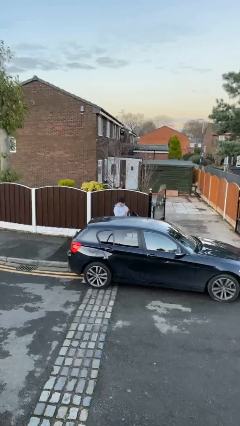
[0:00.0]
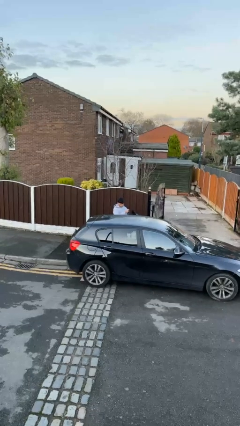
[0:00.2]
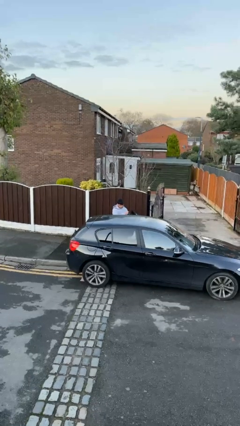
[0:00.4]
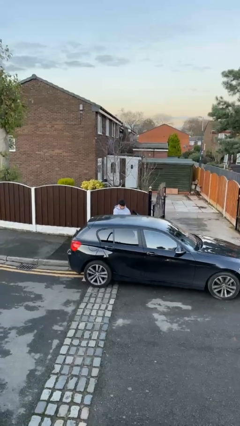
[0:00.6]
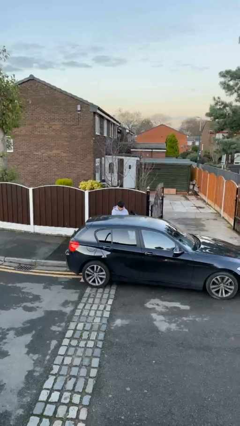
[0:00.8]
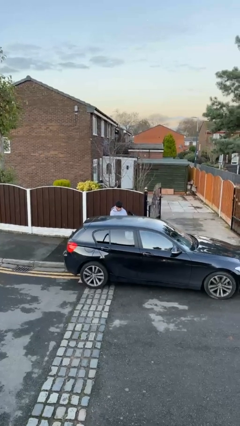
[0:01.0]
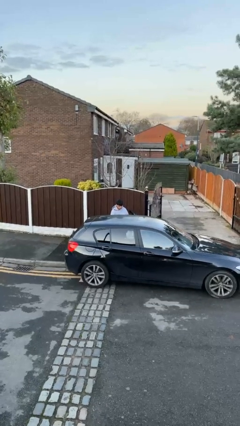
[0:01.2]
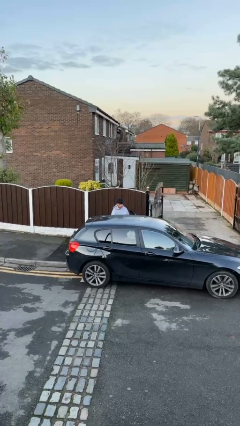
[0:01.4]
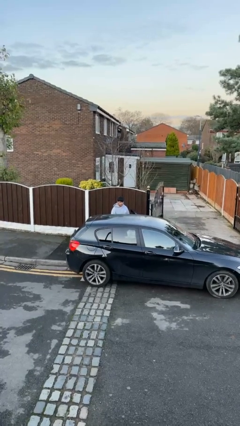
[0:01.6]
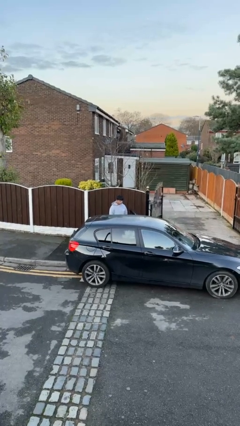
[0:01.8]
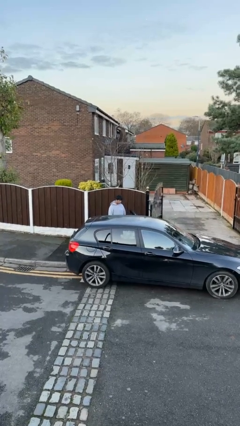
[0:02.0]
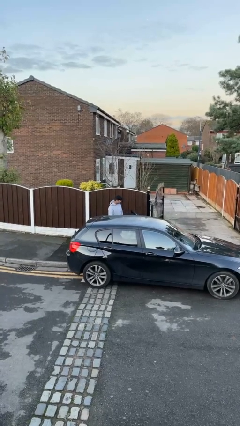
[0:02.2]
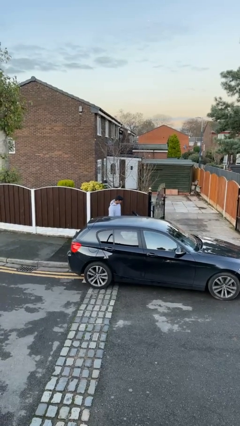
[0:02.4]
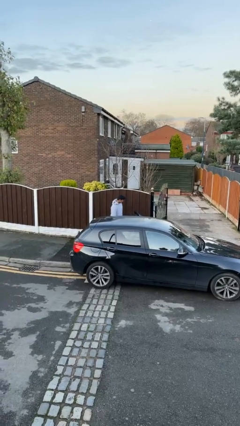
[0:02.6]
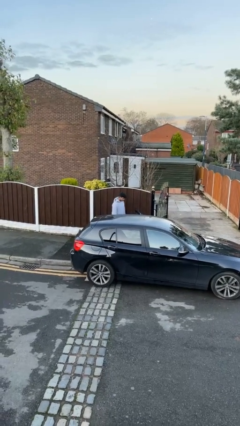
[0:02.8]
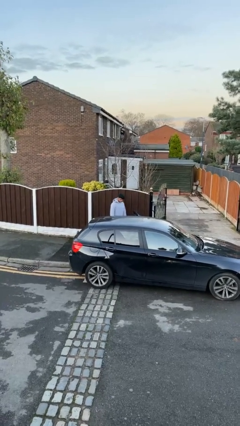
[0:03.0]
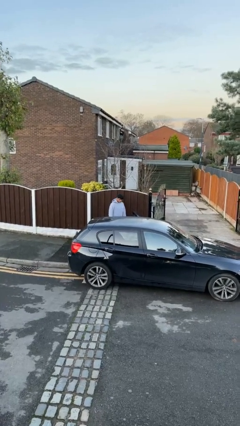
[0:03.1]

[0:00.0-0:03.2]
person loads car

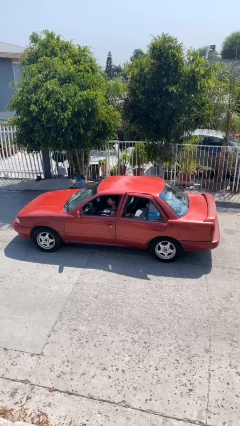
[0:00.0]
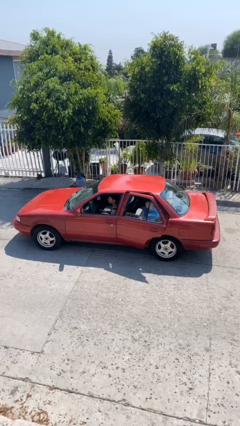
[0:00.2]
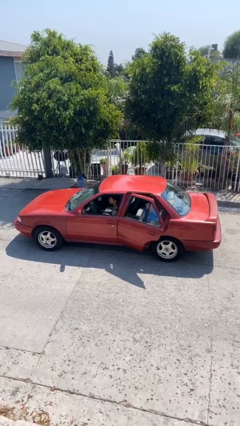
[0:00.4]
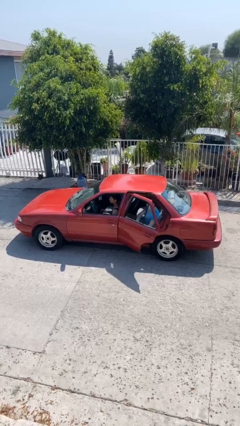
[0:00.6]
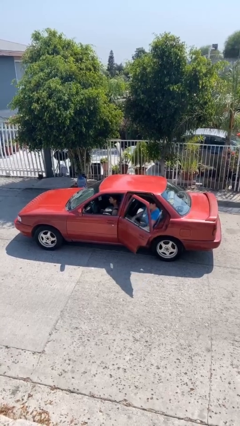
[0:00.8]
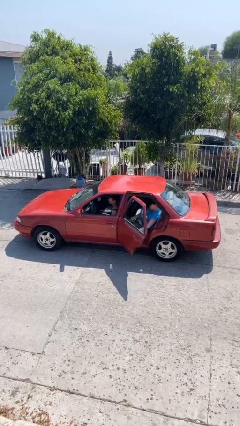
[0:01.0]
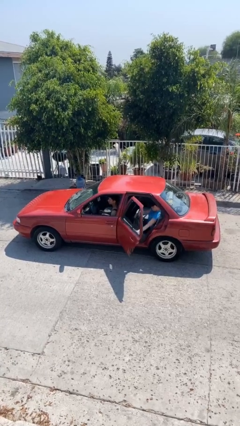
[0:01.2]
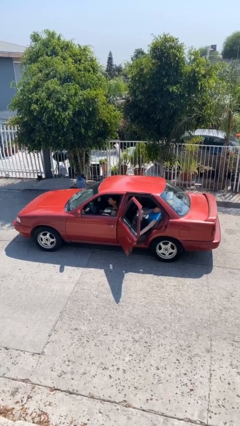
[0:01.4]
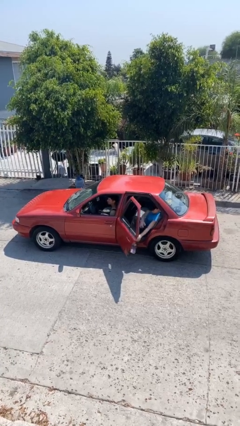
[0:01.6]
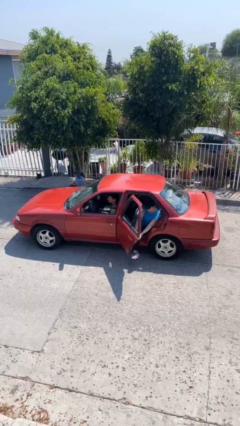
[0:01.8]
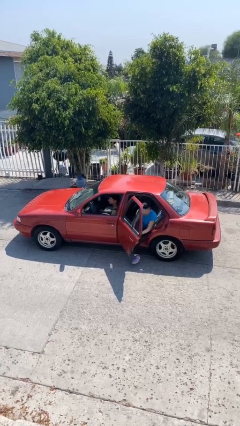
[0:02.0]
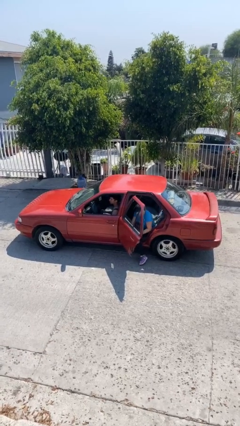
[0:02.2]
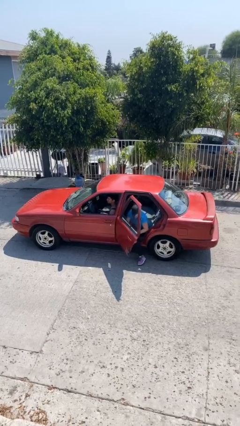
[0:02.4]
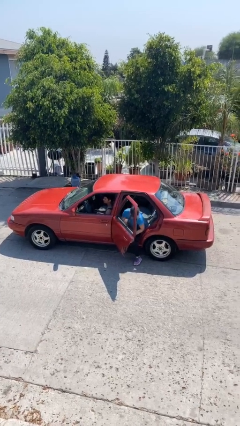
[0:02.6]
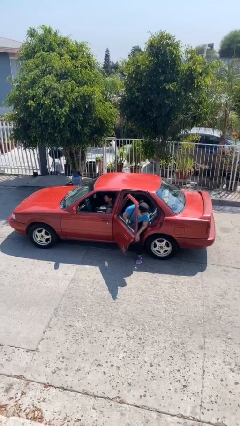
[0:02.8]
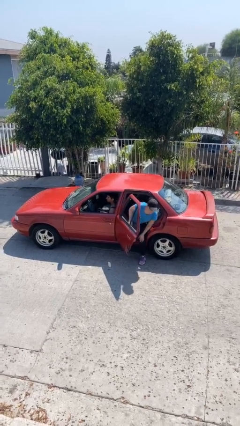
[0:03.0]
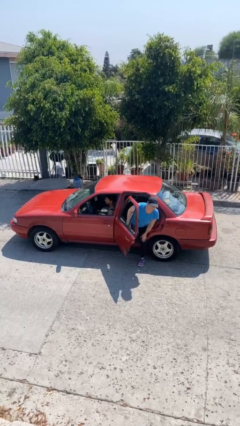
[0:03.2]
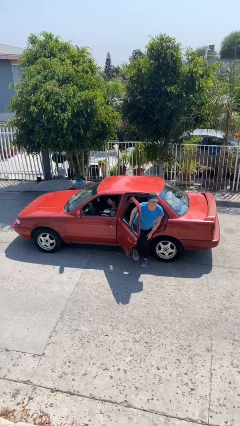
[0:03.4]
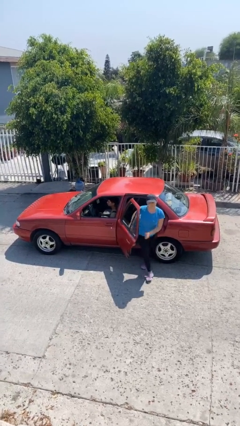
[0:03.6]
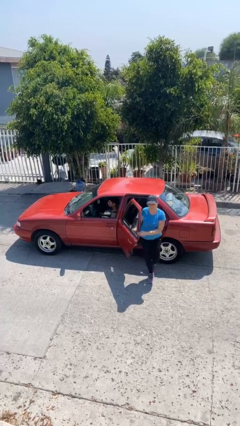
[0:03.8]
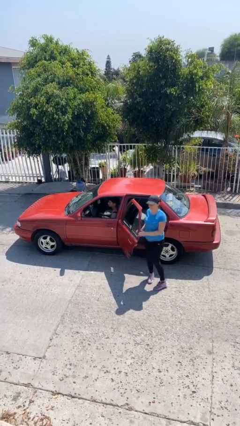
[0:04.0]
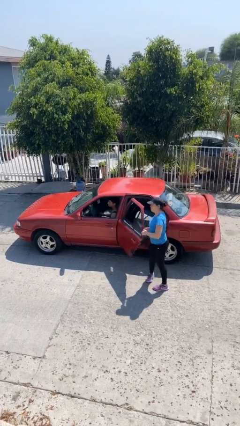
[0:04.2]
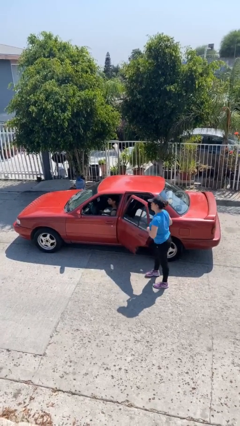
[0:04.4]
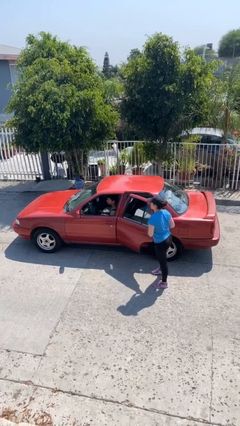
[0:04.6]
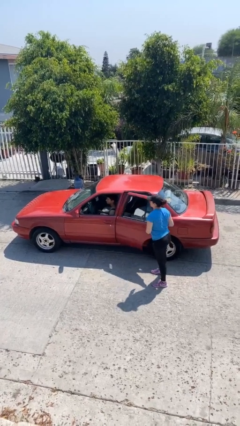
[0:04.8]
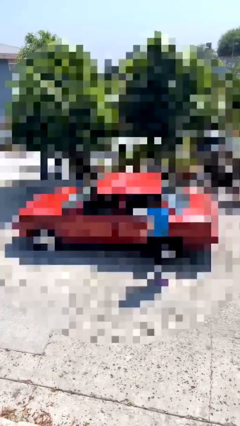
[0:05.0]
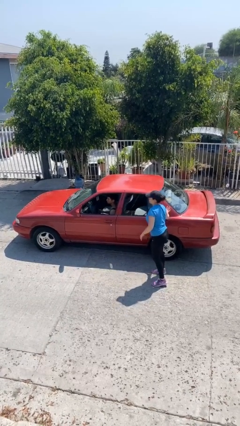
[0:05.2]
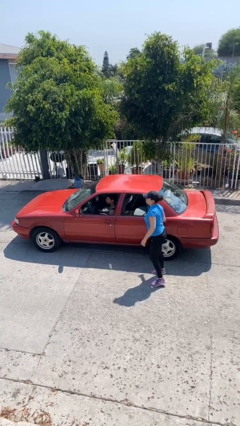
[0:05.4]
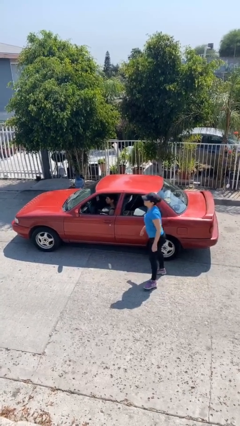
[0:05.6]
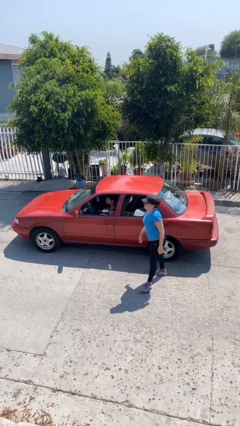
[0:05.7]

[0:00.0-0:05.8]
car drops off person

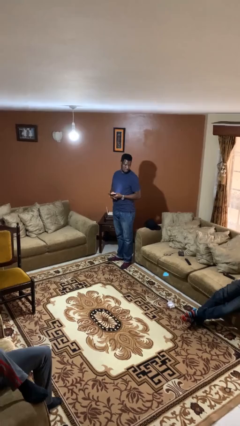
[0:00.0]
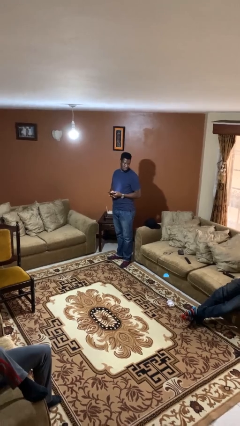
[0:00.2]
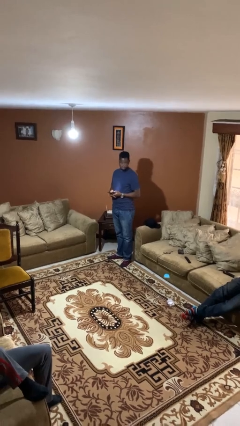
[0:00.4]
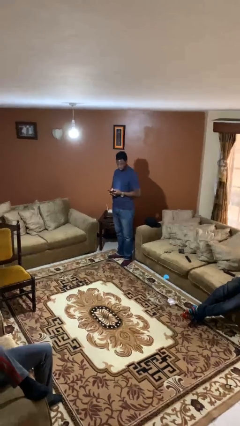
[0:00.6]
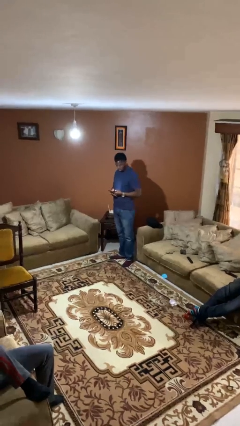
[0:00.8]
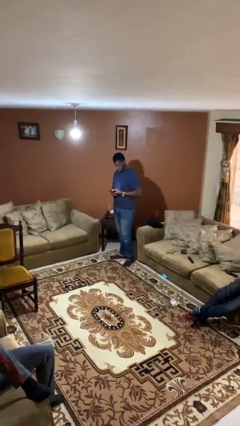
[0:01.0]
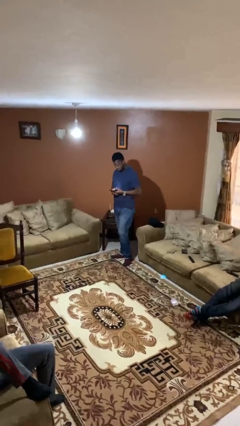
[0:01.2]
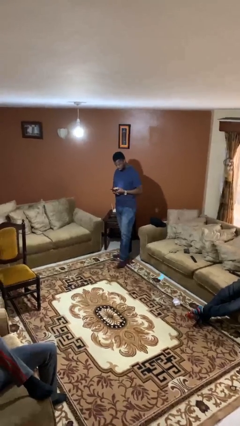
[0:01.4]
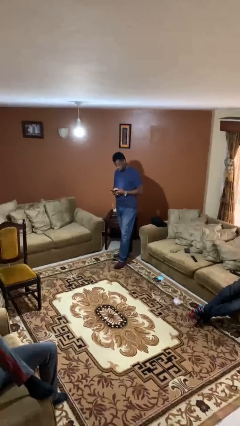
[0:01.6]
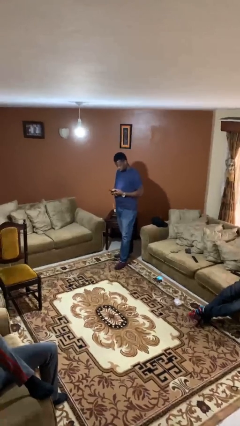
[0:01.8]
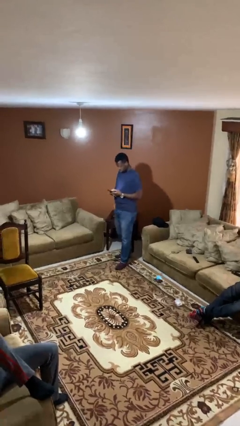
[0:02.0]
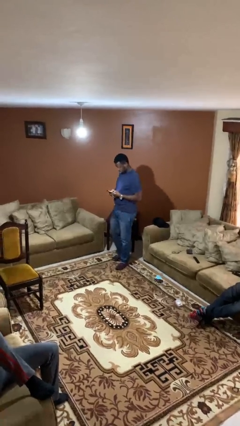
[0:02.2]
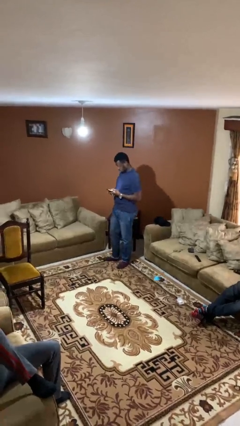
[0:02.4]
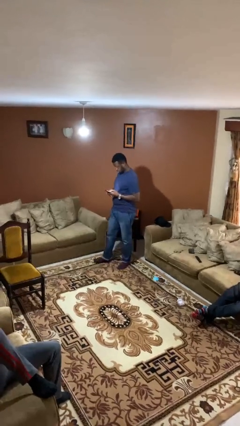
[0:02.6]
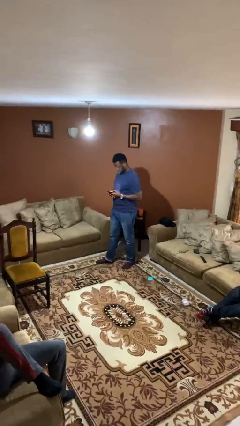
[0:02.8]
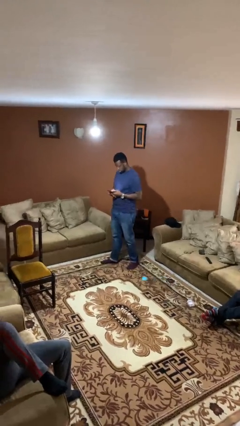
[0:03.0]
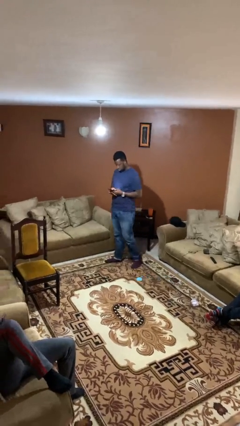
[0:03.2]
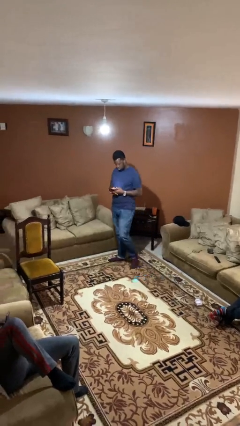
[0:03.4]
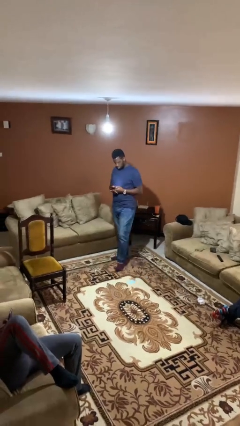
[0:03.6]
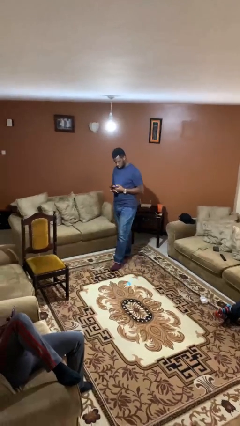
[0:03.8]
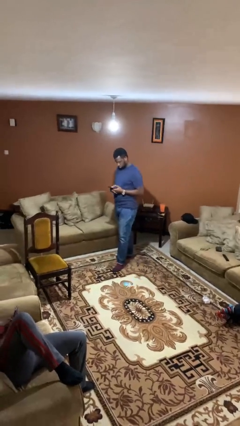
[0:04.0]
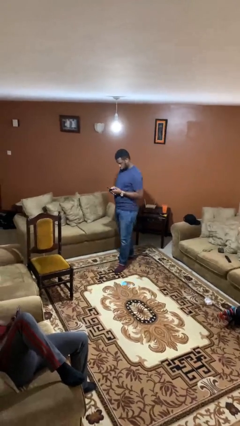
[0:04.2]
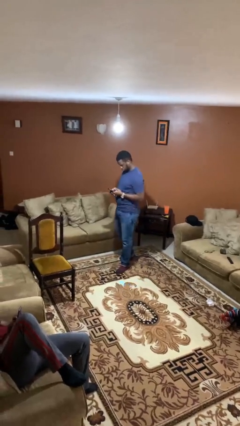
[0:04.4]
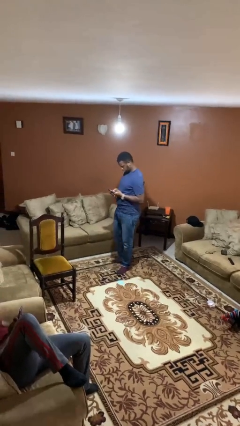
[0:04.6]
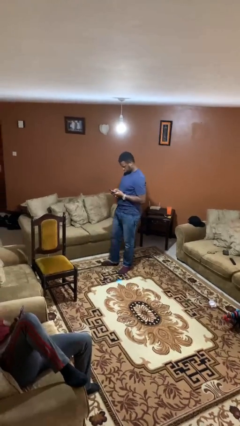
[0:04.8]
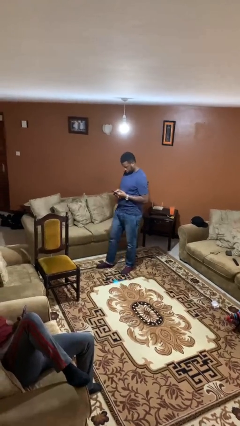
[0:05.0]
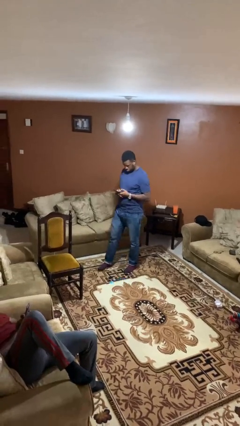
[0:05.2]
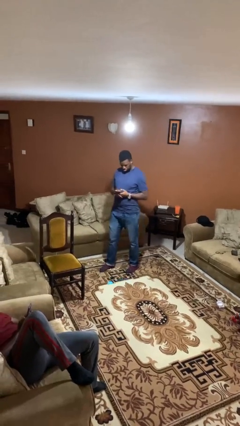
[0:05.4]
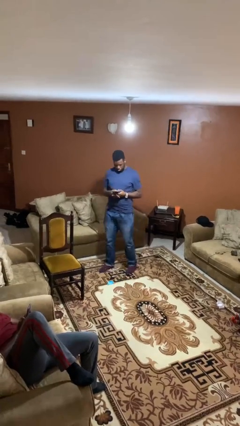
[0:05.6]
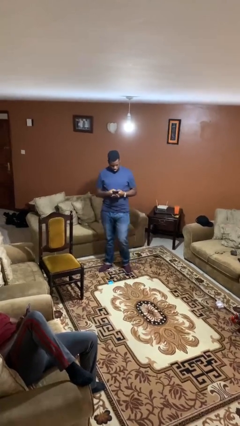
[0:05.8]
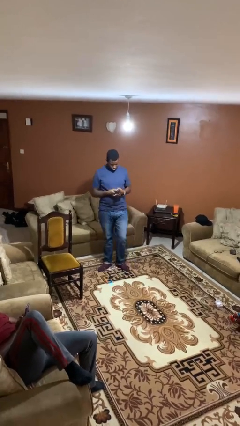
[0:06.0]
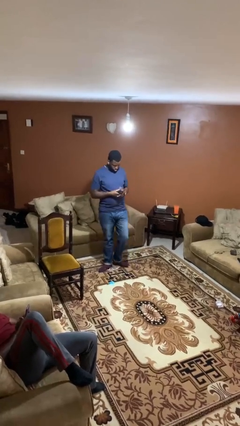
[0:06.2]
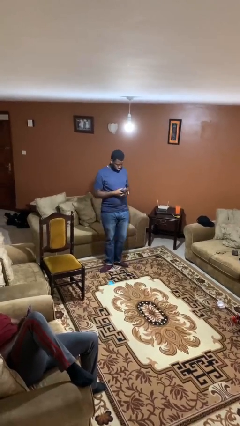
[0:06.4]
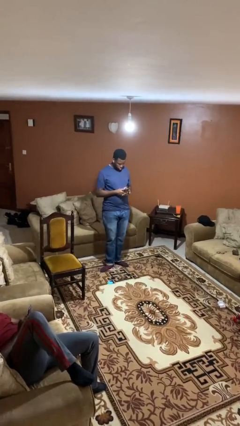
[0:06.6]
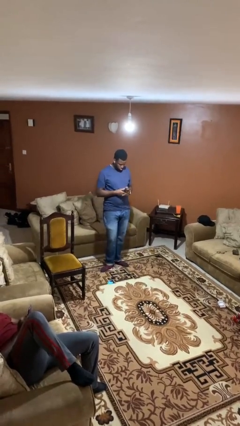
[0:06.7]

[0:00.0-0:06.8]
person texts on phone

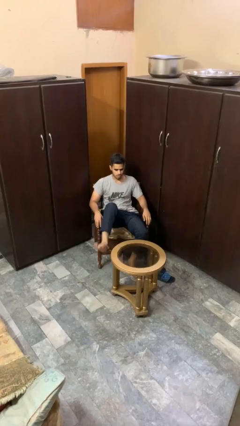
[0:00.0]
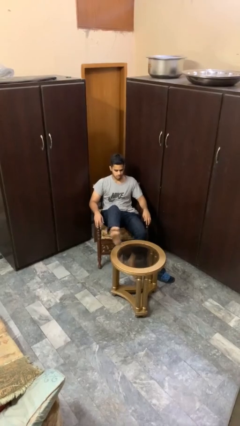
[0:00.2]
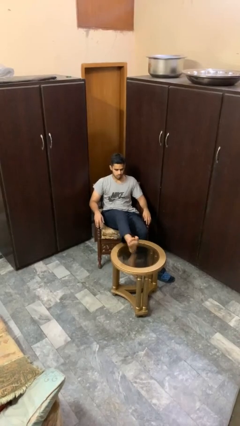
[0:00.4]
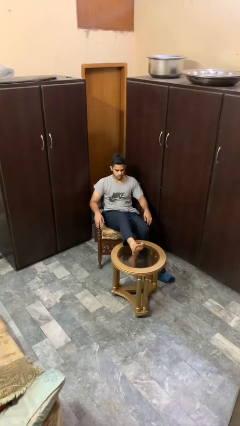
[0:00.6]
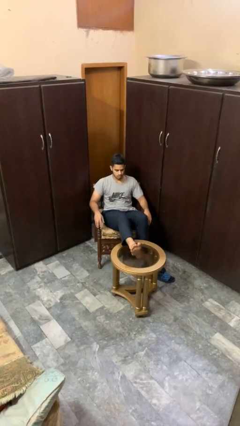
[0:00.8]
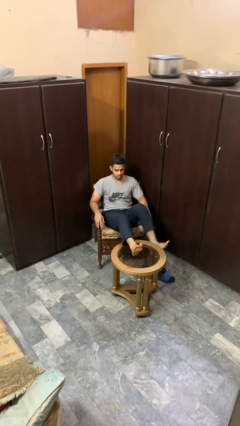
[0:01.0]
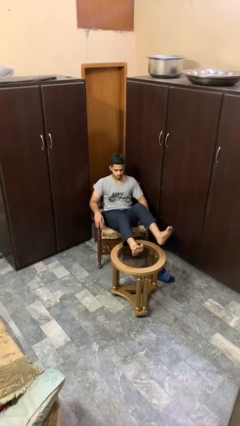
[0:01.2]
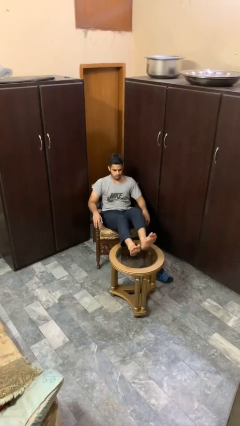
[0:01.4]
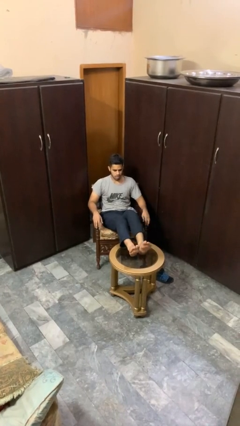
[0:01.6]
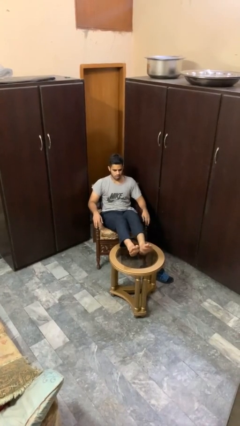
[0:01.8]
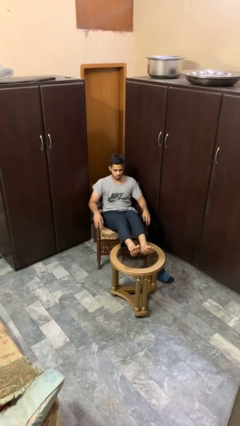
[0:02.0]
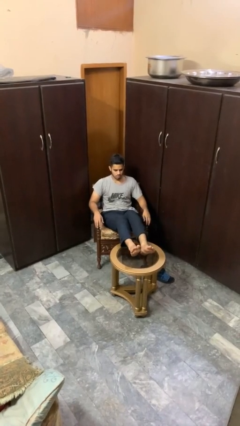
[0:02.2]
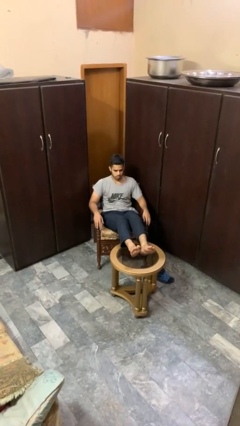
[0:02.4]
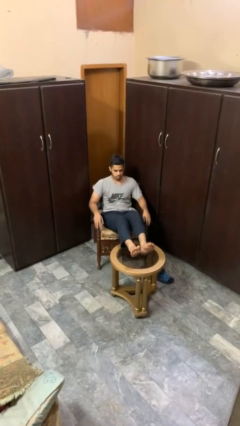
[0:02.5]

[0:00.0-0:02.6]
person puts feet up
